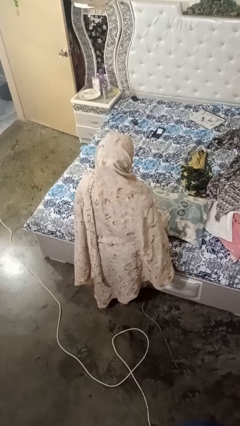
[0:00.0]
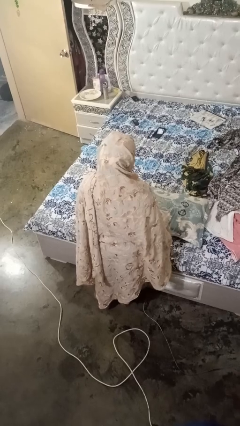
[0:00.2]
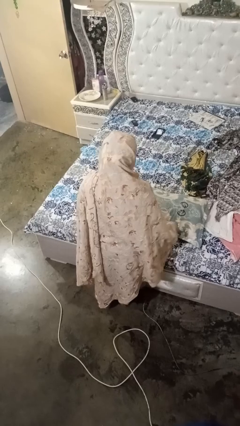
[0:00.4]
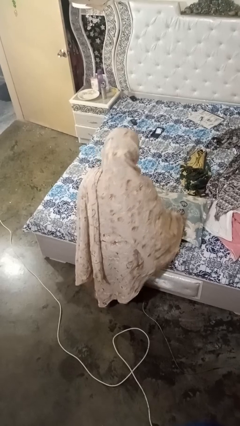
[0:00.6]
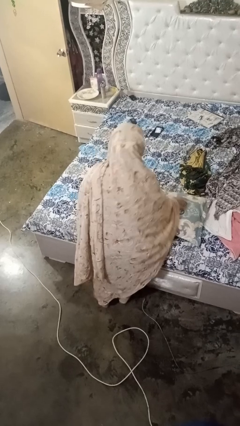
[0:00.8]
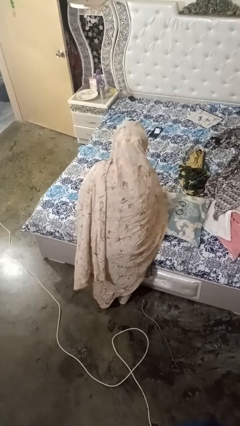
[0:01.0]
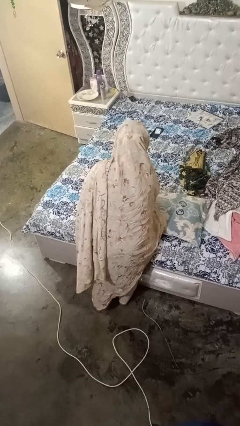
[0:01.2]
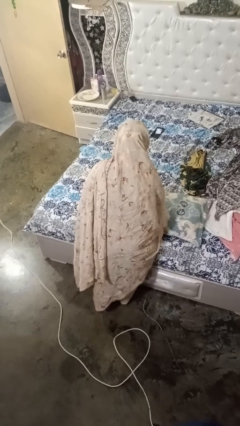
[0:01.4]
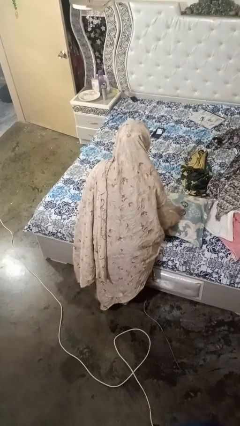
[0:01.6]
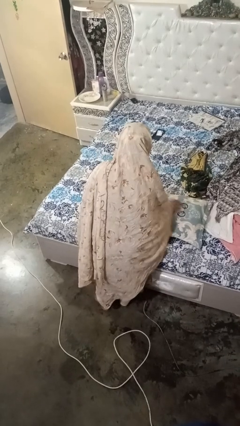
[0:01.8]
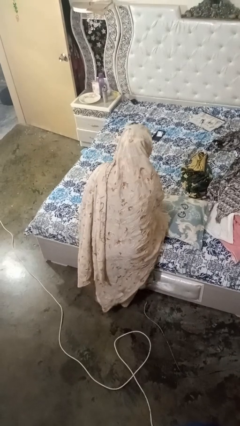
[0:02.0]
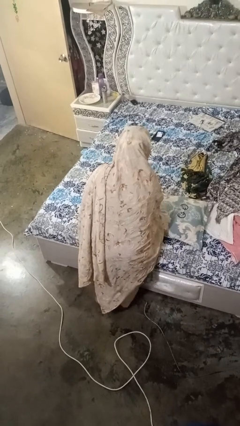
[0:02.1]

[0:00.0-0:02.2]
person waves hand over object

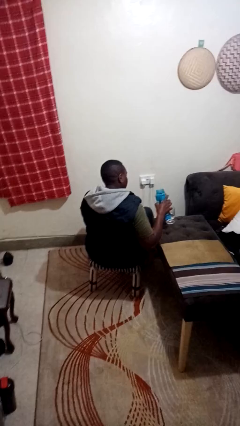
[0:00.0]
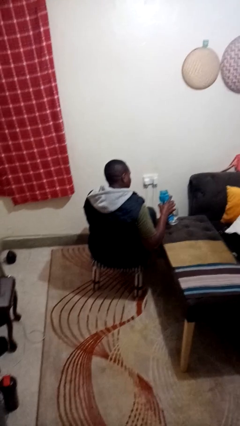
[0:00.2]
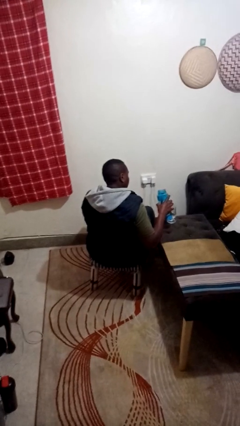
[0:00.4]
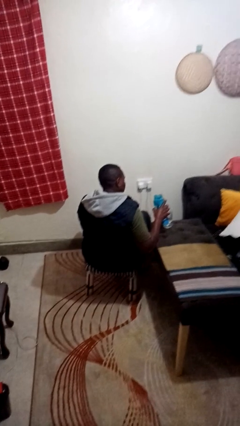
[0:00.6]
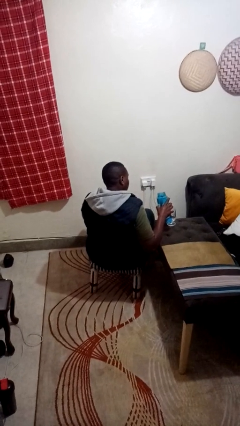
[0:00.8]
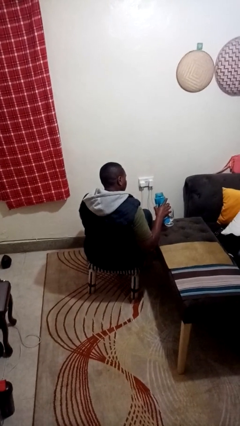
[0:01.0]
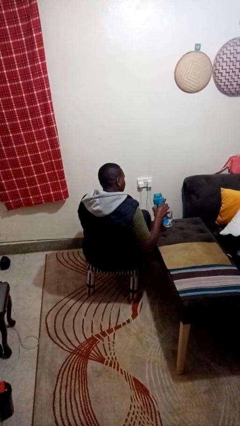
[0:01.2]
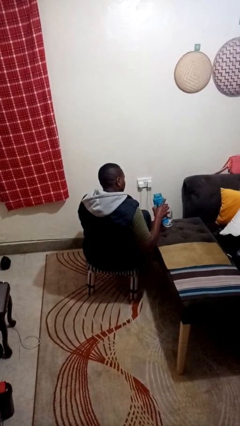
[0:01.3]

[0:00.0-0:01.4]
person unscrews lid from bottle

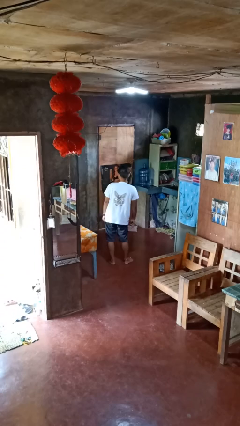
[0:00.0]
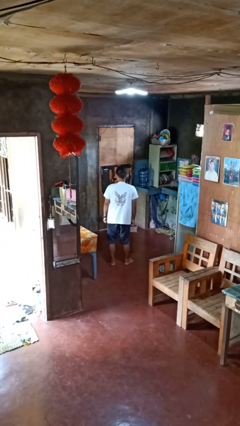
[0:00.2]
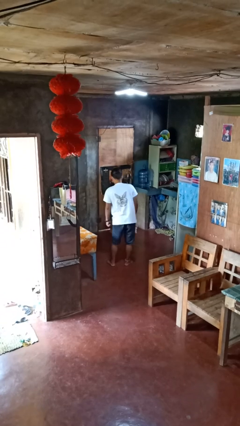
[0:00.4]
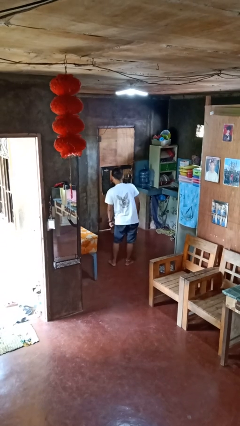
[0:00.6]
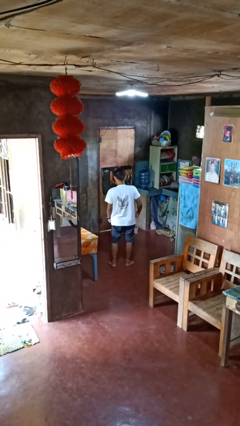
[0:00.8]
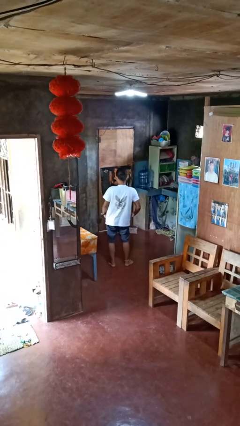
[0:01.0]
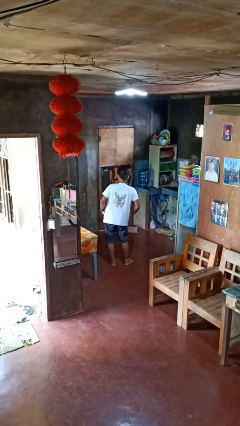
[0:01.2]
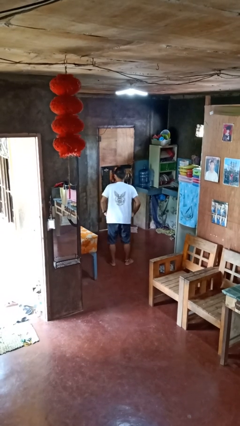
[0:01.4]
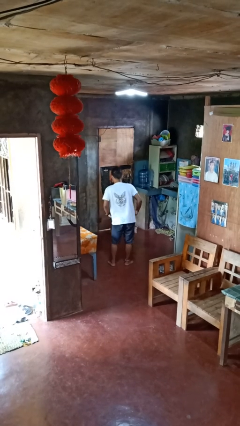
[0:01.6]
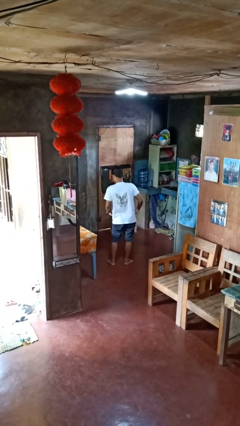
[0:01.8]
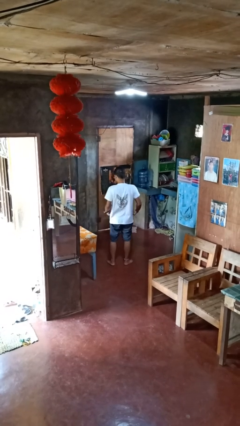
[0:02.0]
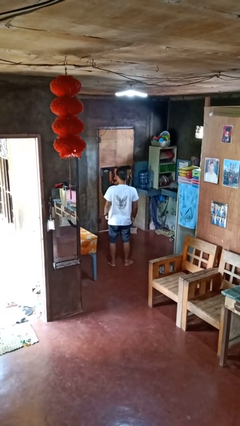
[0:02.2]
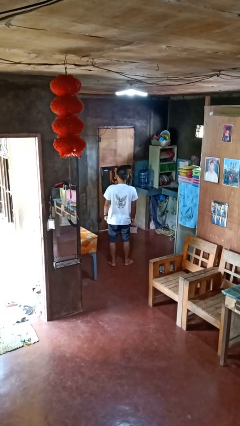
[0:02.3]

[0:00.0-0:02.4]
person wiggles hips

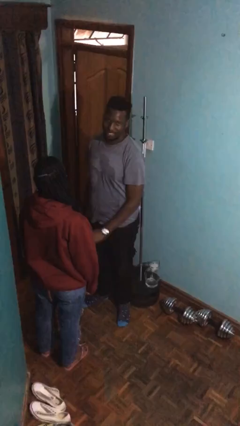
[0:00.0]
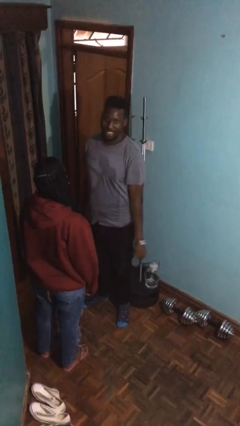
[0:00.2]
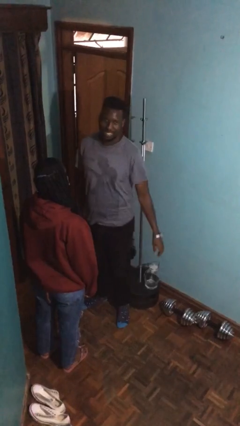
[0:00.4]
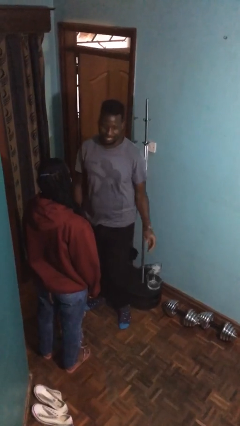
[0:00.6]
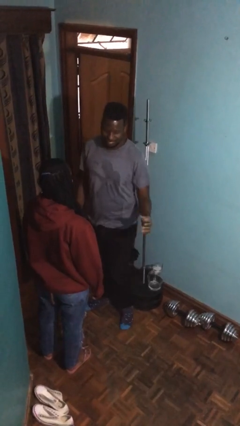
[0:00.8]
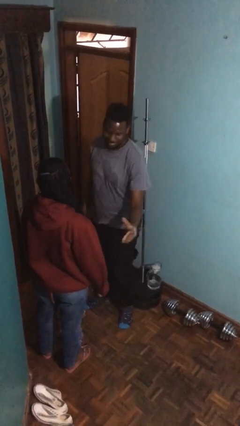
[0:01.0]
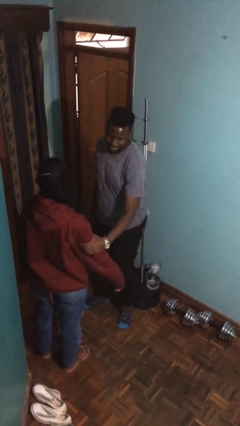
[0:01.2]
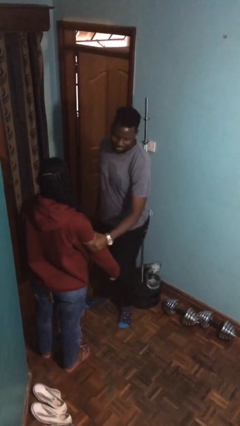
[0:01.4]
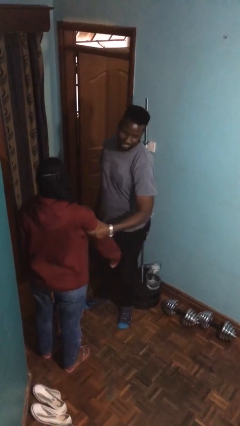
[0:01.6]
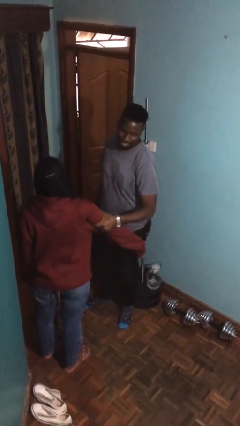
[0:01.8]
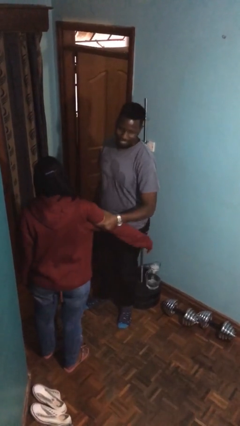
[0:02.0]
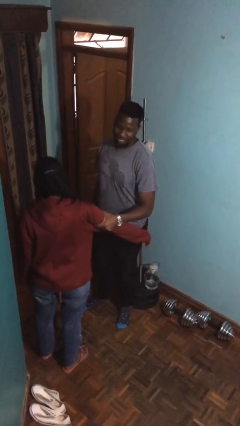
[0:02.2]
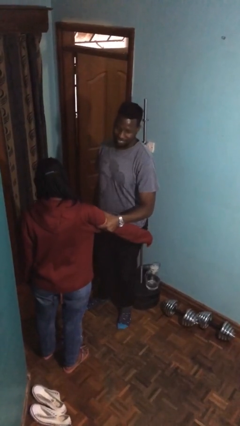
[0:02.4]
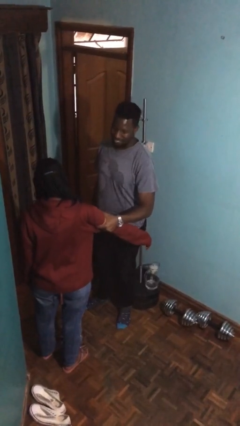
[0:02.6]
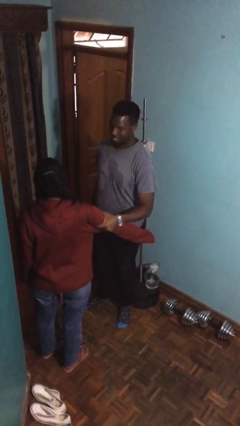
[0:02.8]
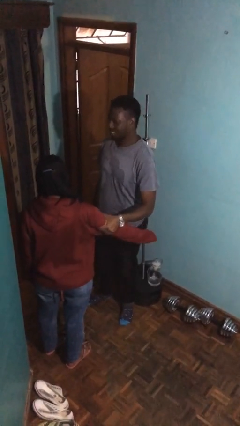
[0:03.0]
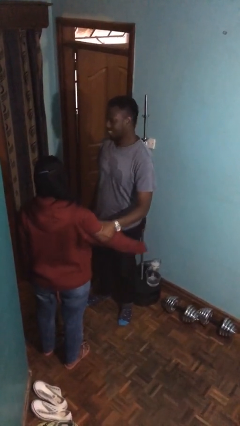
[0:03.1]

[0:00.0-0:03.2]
person grabs person by bicep

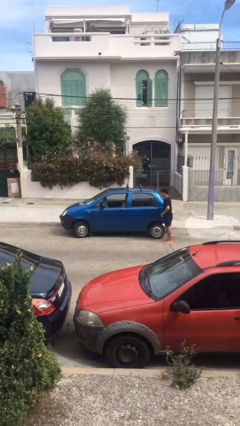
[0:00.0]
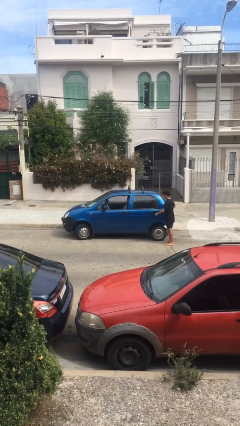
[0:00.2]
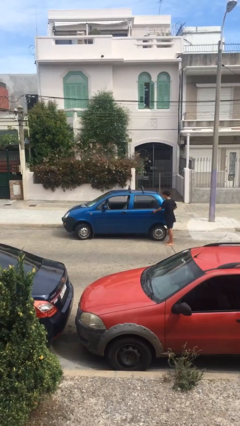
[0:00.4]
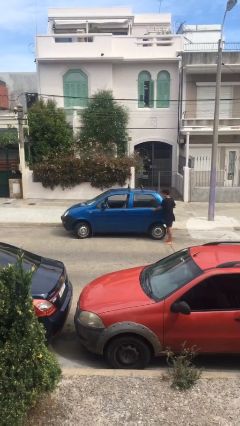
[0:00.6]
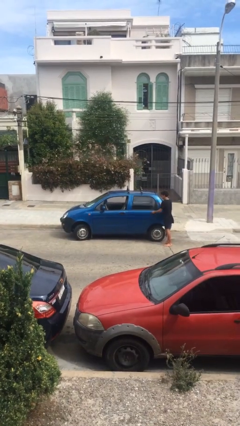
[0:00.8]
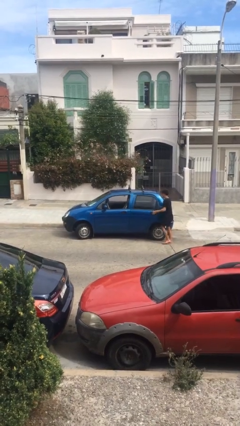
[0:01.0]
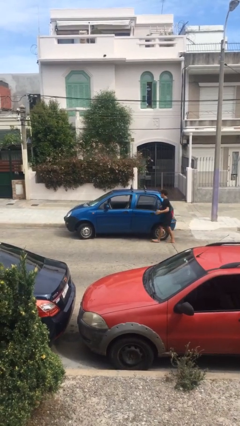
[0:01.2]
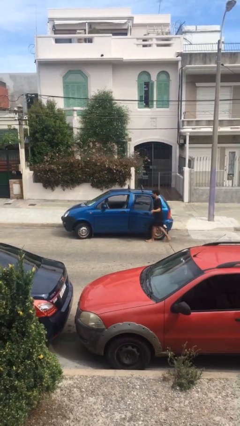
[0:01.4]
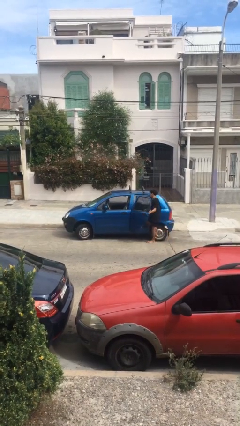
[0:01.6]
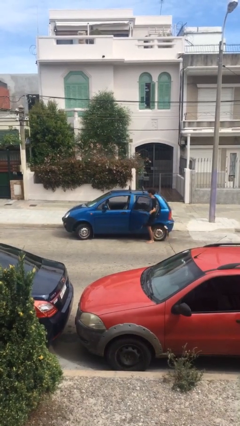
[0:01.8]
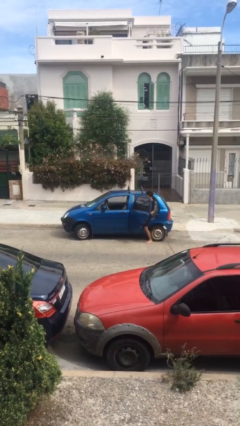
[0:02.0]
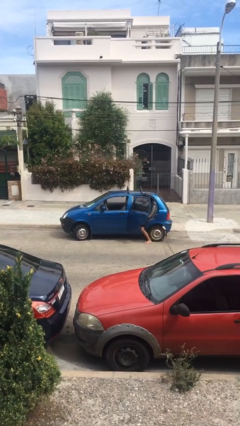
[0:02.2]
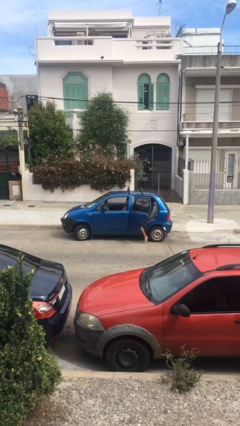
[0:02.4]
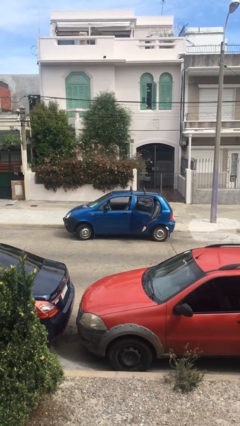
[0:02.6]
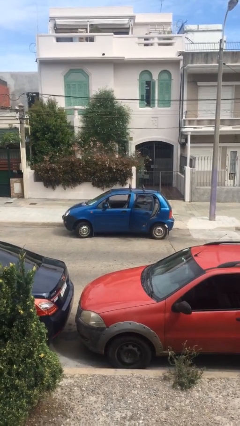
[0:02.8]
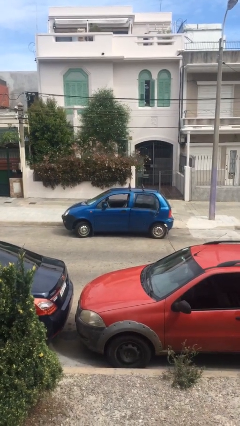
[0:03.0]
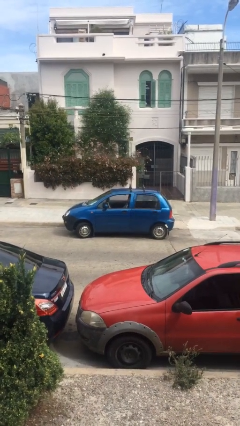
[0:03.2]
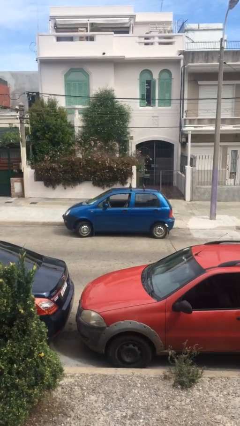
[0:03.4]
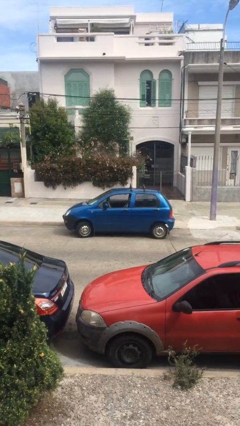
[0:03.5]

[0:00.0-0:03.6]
car picks up person

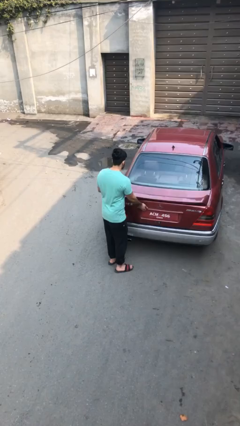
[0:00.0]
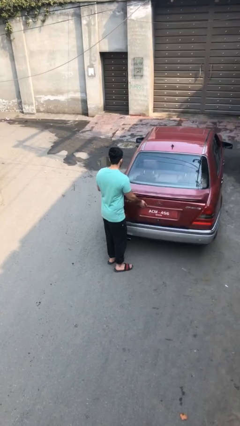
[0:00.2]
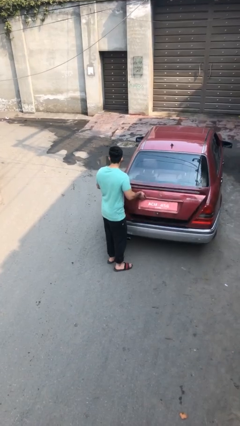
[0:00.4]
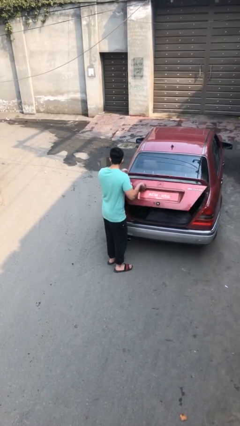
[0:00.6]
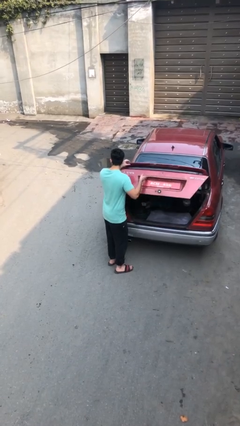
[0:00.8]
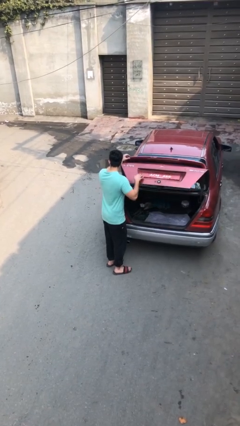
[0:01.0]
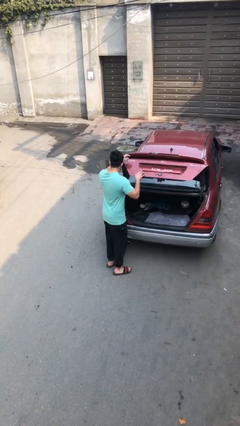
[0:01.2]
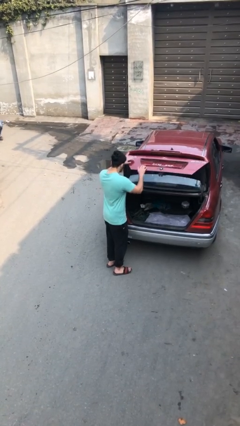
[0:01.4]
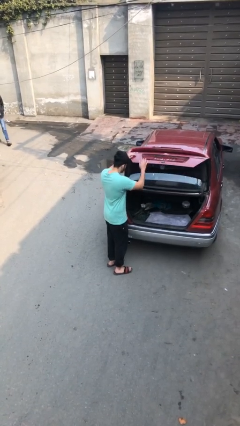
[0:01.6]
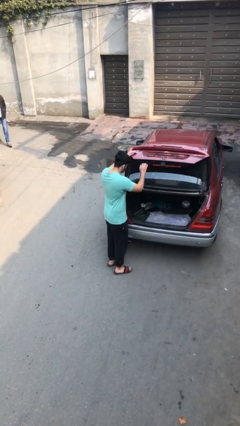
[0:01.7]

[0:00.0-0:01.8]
person opens car trunk

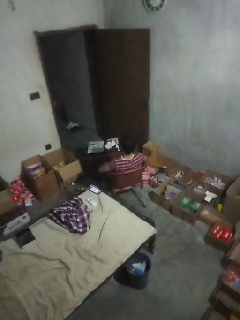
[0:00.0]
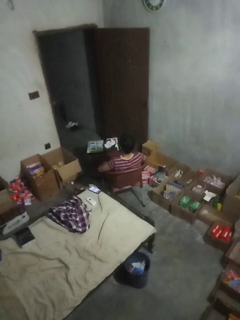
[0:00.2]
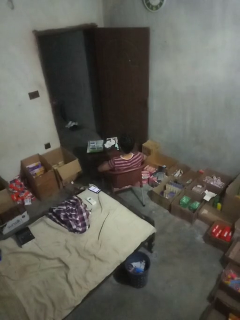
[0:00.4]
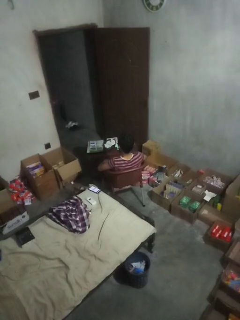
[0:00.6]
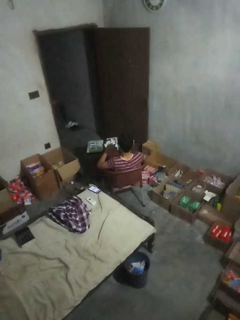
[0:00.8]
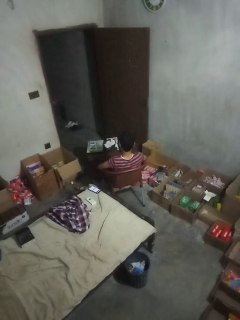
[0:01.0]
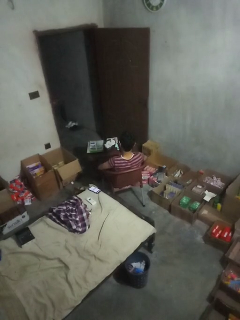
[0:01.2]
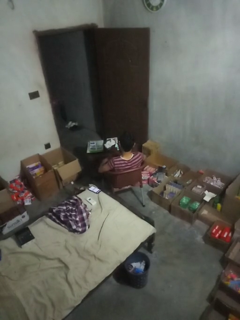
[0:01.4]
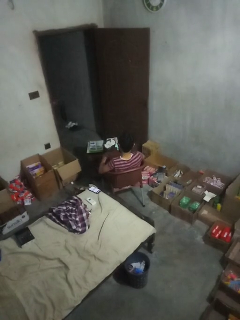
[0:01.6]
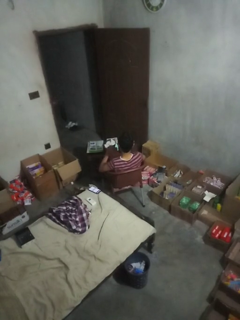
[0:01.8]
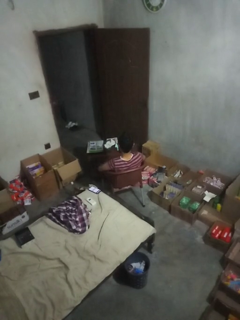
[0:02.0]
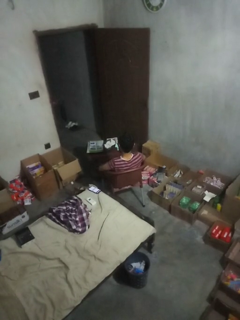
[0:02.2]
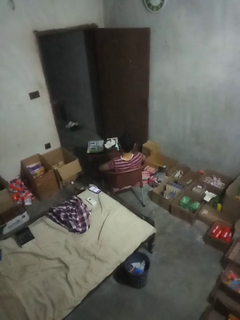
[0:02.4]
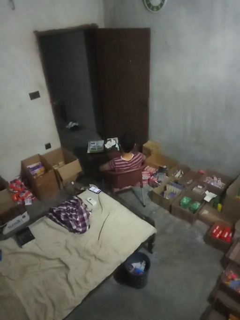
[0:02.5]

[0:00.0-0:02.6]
person slaps hands on thighs

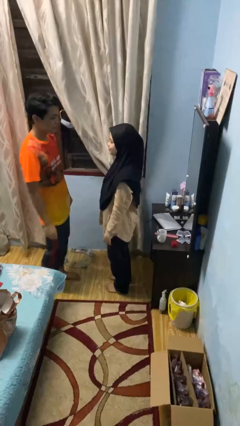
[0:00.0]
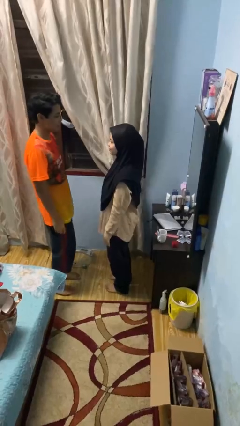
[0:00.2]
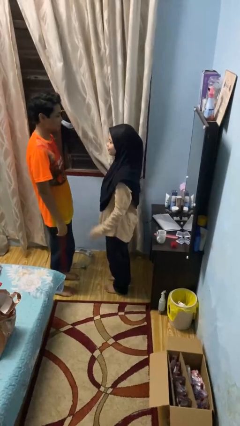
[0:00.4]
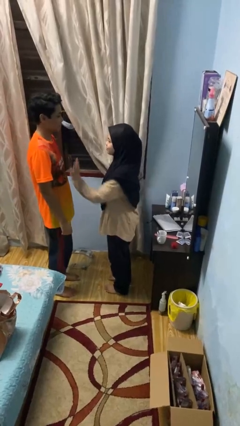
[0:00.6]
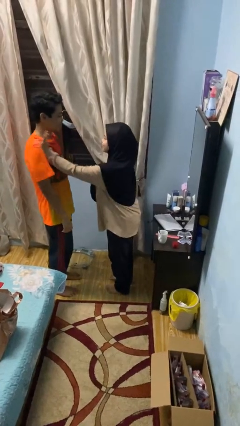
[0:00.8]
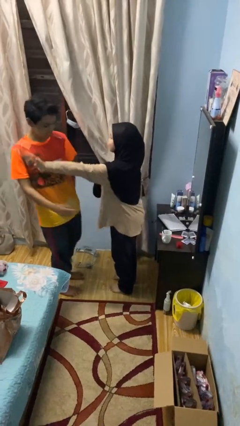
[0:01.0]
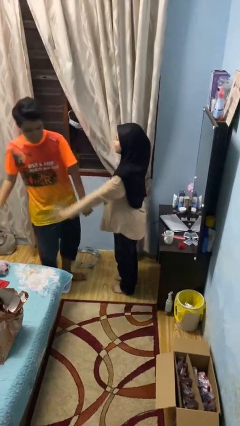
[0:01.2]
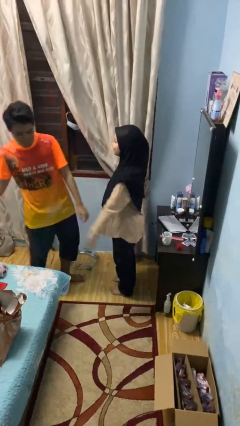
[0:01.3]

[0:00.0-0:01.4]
person shoves person
